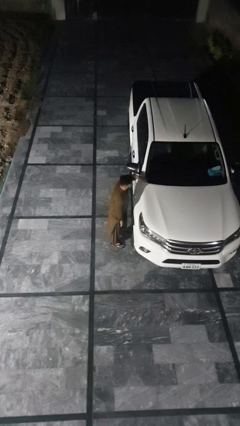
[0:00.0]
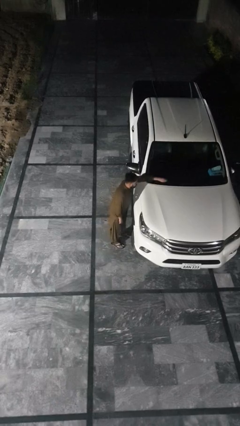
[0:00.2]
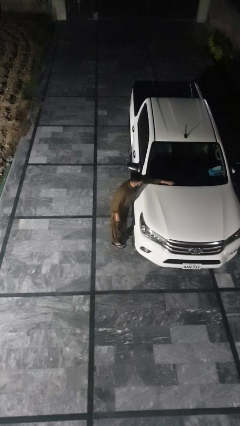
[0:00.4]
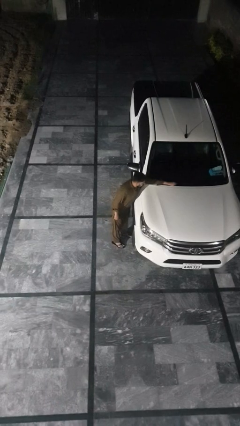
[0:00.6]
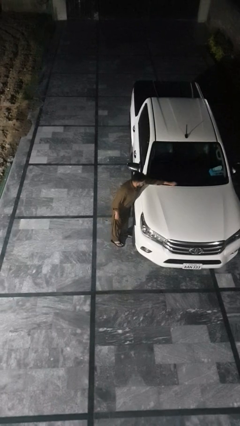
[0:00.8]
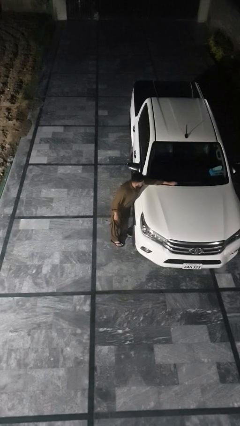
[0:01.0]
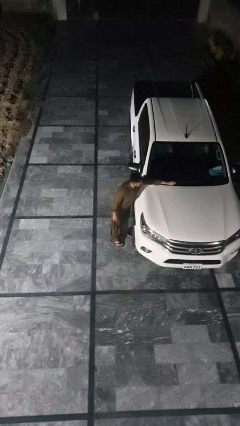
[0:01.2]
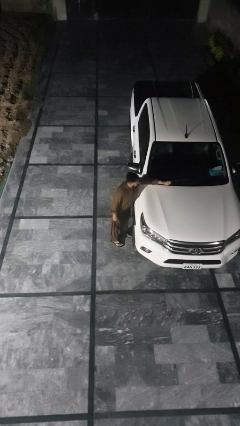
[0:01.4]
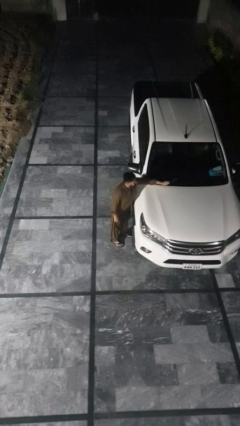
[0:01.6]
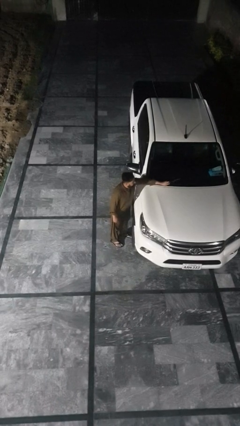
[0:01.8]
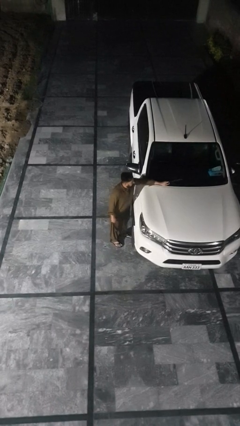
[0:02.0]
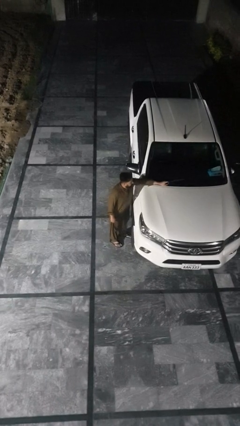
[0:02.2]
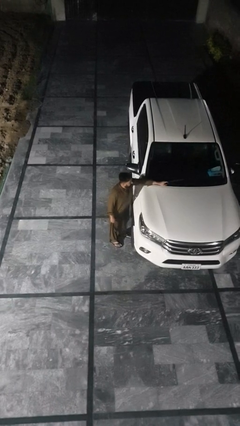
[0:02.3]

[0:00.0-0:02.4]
person flips up car wipers

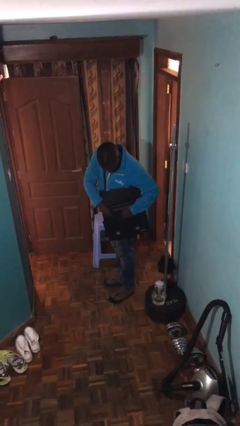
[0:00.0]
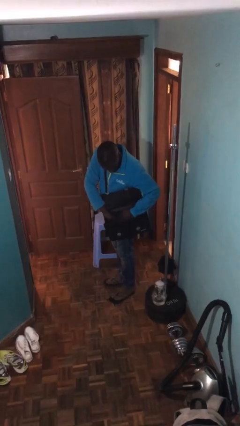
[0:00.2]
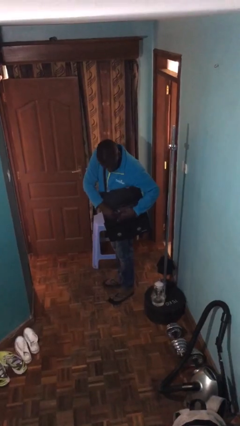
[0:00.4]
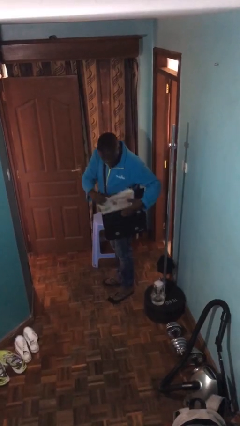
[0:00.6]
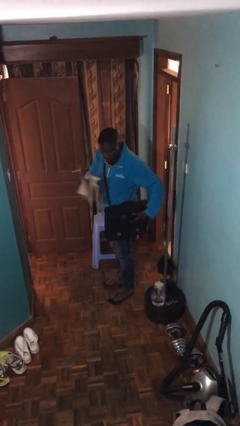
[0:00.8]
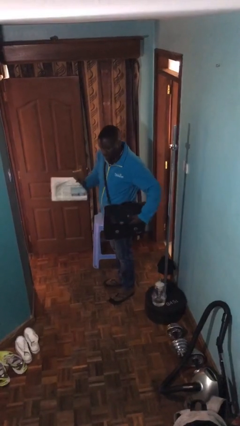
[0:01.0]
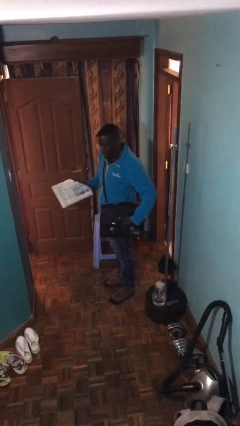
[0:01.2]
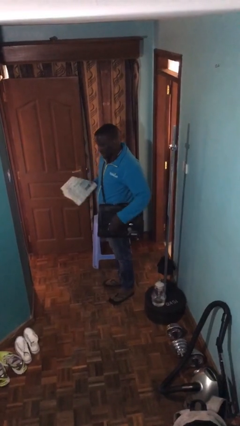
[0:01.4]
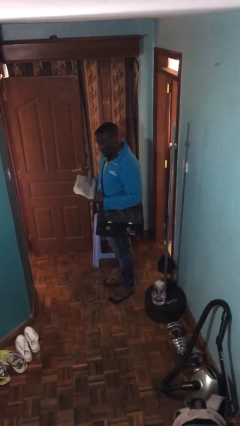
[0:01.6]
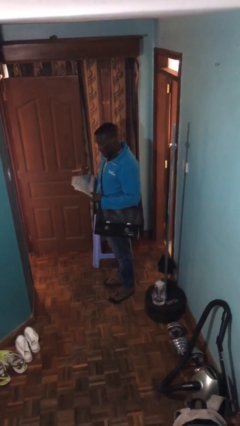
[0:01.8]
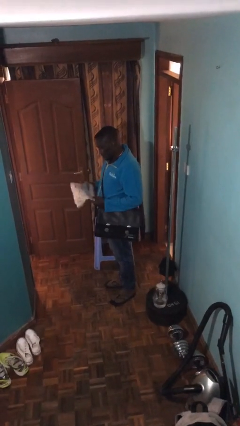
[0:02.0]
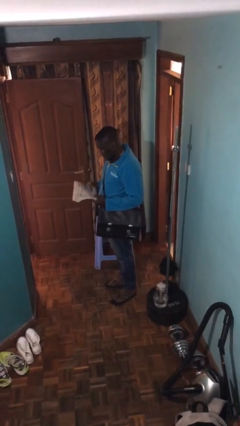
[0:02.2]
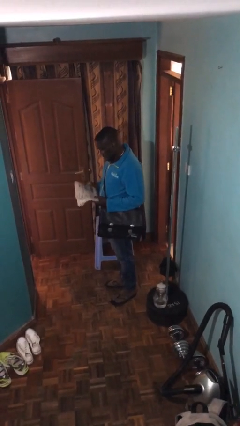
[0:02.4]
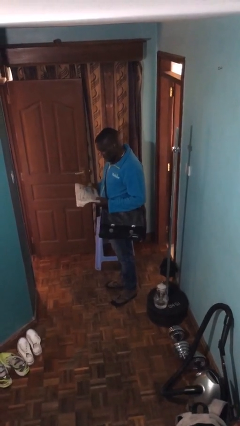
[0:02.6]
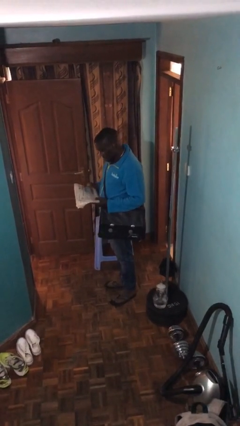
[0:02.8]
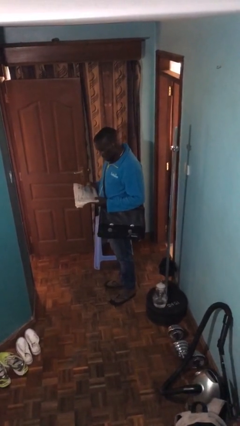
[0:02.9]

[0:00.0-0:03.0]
person takes object from purse

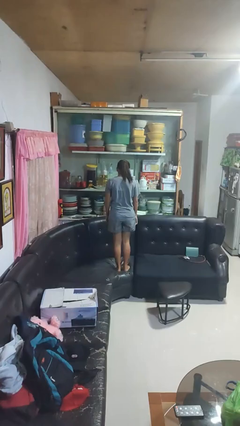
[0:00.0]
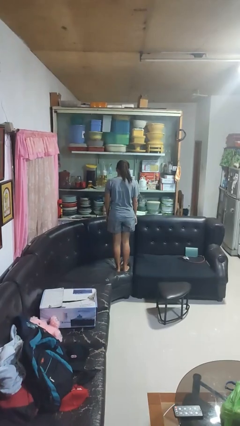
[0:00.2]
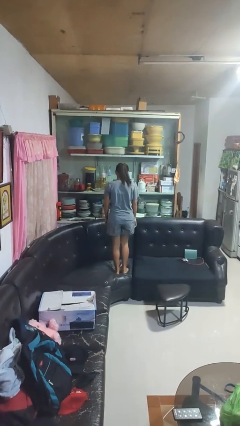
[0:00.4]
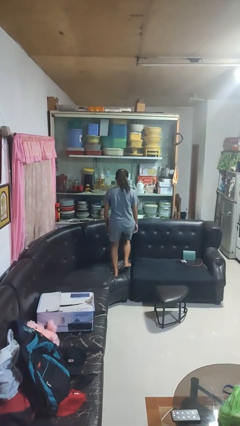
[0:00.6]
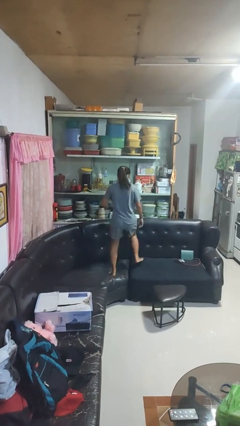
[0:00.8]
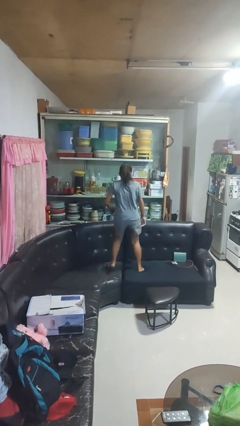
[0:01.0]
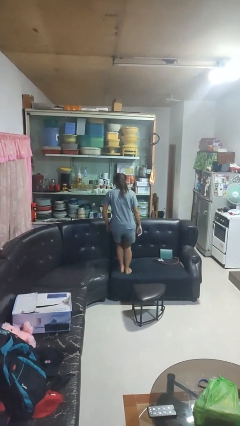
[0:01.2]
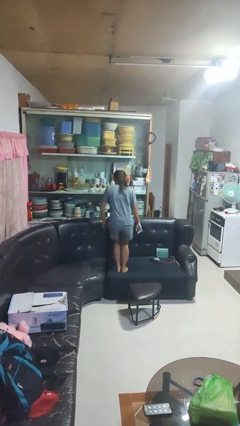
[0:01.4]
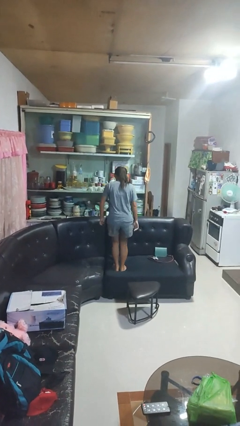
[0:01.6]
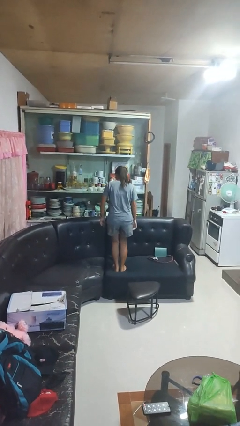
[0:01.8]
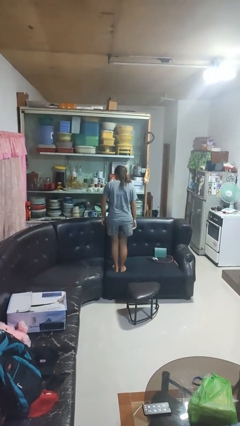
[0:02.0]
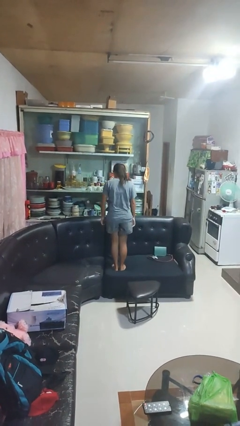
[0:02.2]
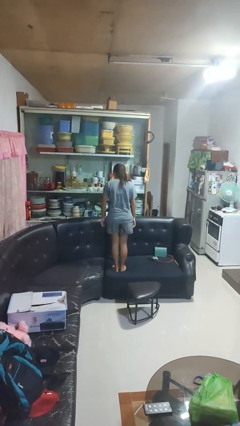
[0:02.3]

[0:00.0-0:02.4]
person jumps on couch

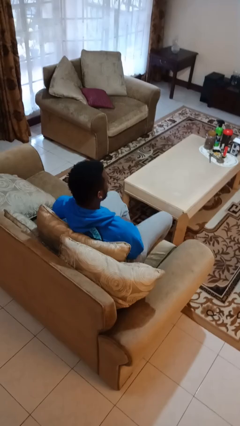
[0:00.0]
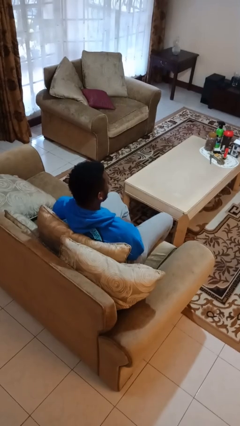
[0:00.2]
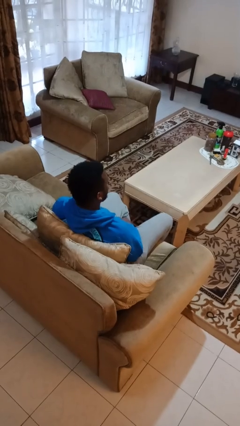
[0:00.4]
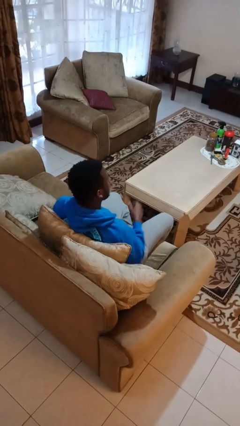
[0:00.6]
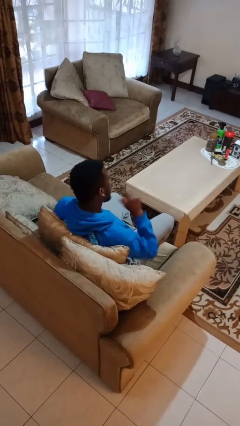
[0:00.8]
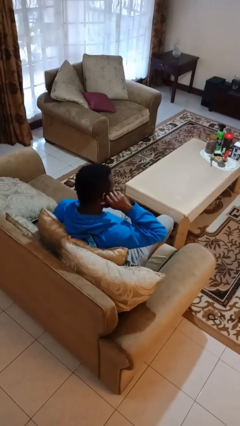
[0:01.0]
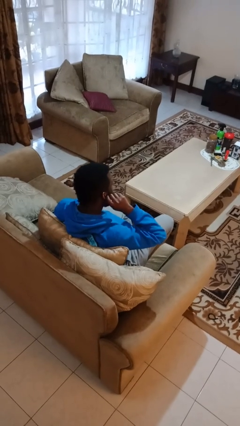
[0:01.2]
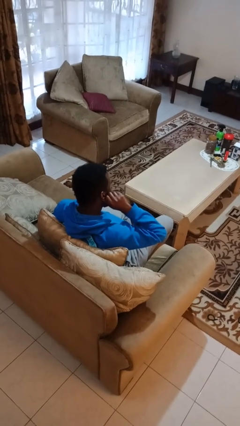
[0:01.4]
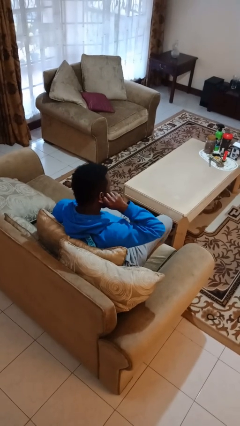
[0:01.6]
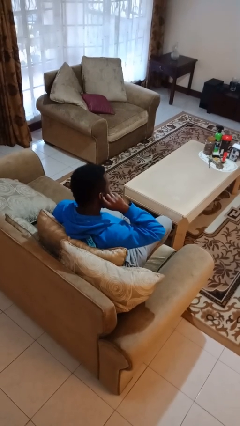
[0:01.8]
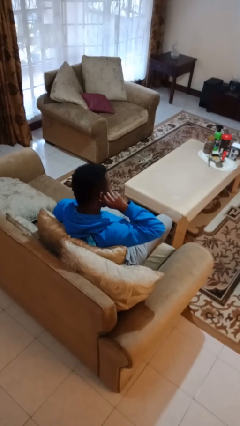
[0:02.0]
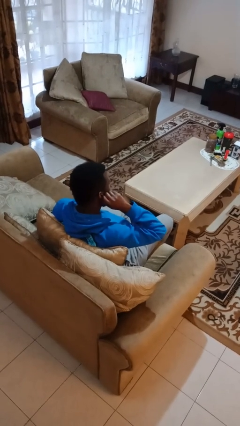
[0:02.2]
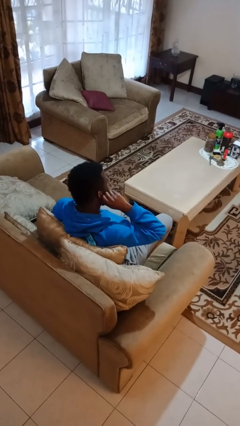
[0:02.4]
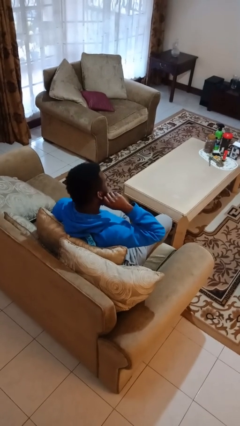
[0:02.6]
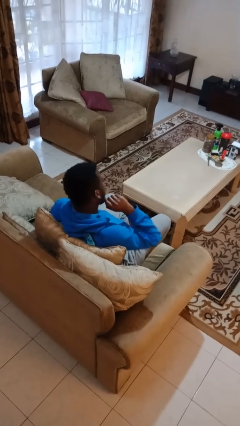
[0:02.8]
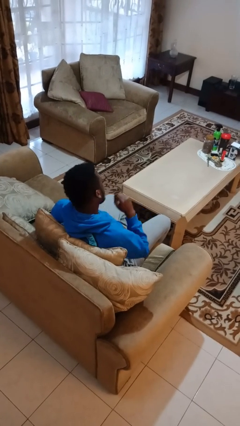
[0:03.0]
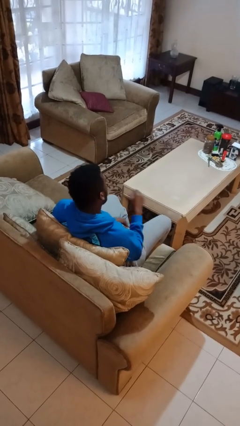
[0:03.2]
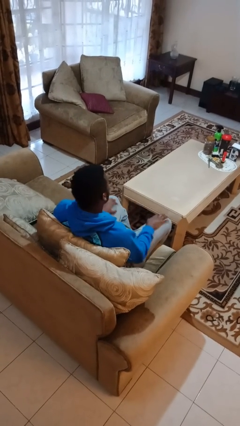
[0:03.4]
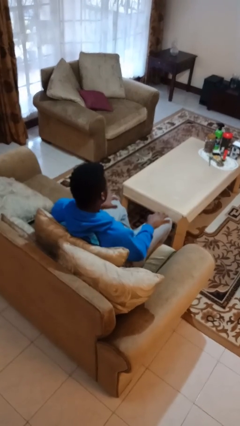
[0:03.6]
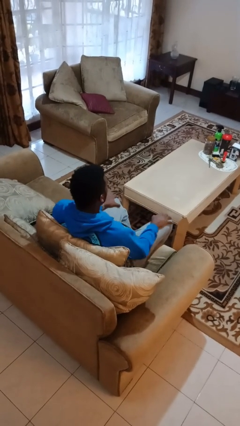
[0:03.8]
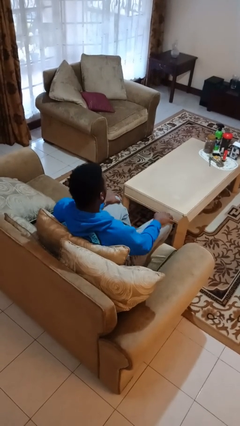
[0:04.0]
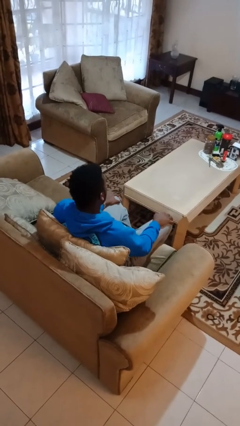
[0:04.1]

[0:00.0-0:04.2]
person touches earlobe

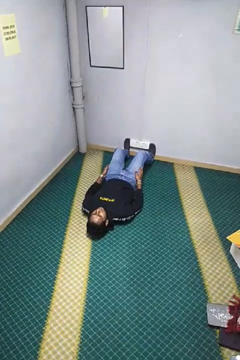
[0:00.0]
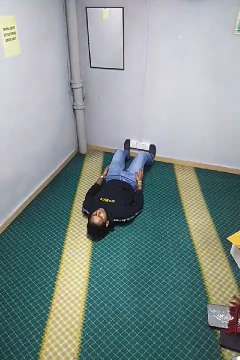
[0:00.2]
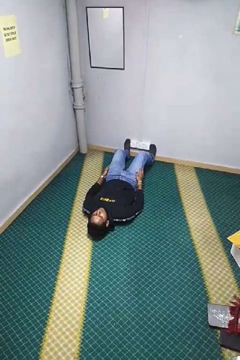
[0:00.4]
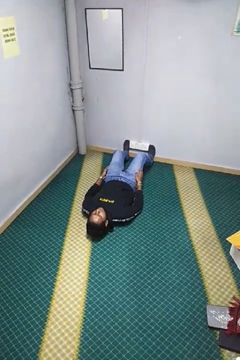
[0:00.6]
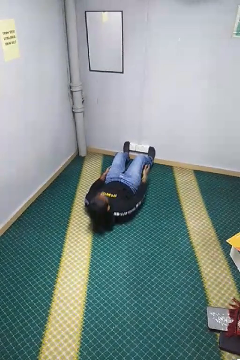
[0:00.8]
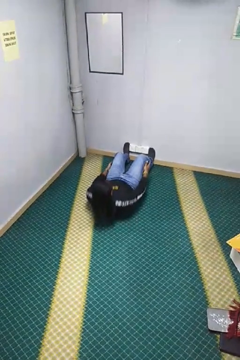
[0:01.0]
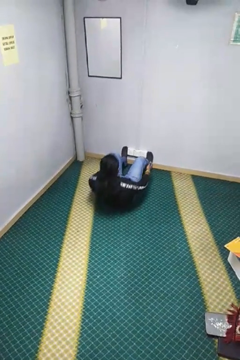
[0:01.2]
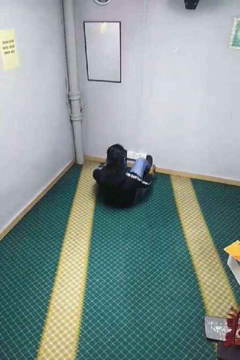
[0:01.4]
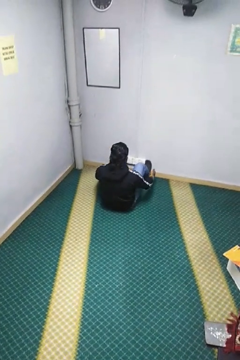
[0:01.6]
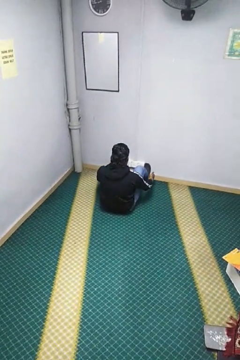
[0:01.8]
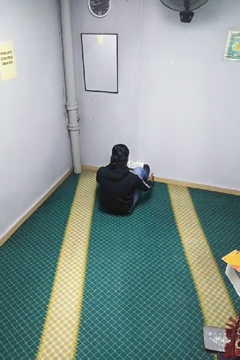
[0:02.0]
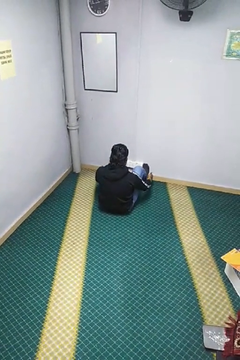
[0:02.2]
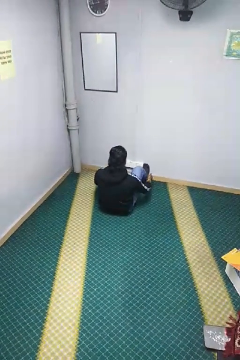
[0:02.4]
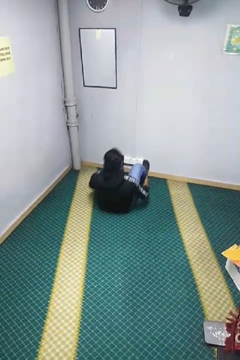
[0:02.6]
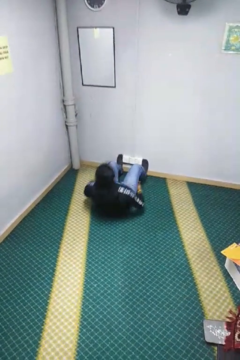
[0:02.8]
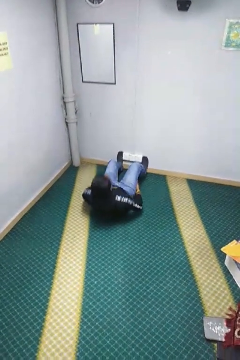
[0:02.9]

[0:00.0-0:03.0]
person exercises with situp

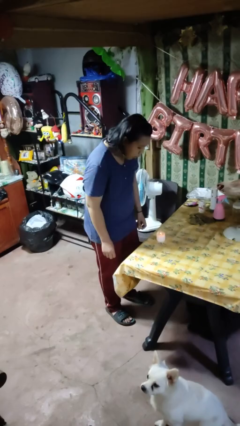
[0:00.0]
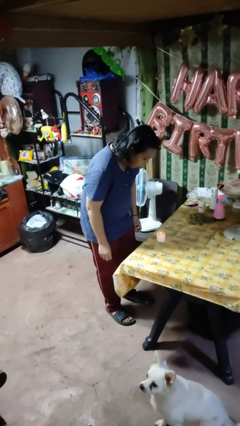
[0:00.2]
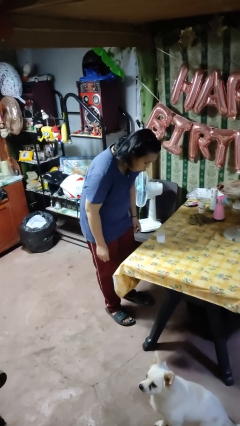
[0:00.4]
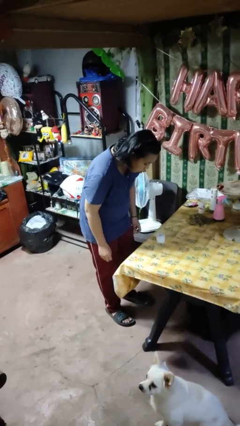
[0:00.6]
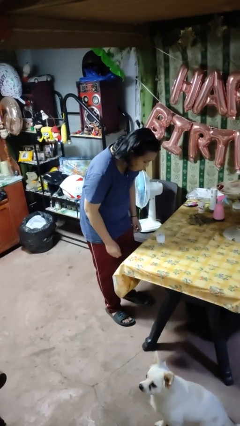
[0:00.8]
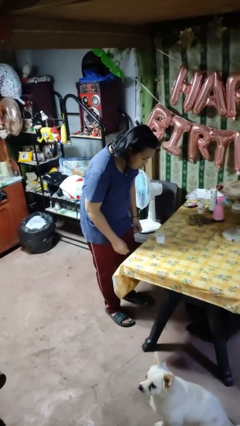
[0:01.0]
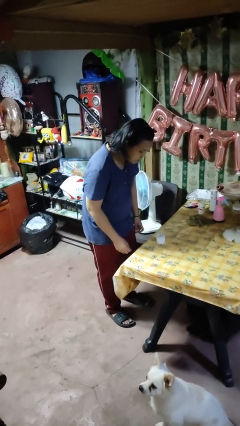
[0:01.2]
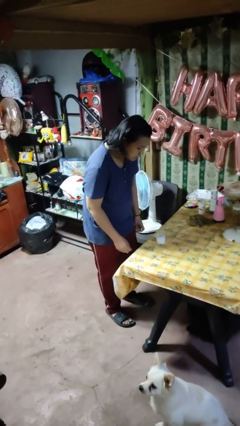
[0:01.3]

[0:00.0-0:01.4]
person extinguishes candle

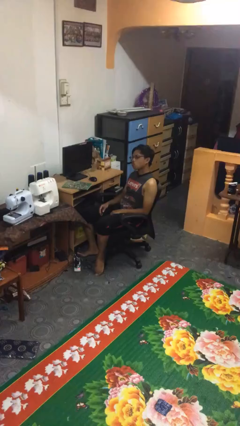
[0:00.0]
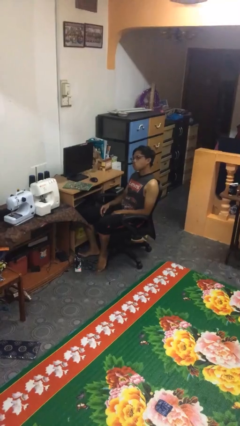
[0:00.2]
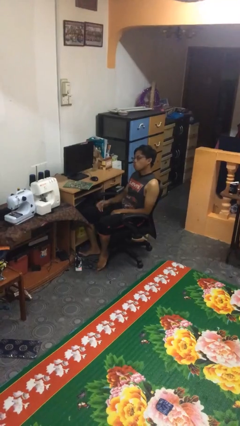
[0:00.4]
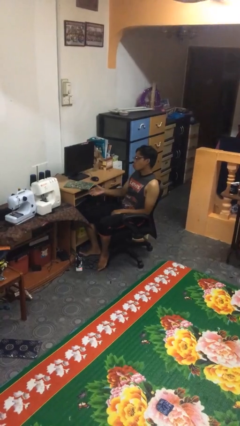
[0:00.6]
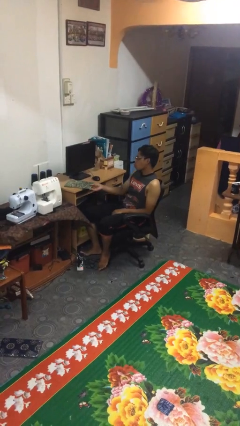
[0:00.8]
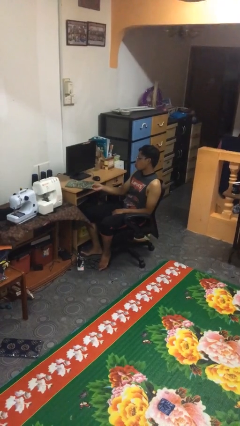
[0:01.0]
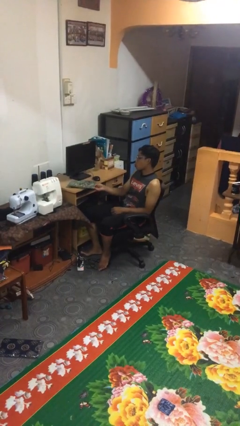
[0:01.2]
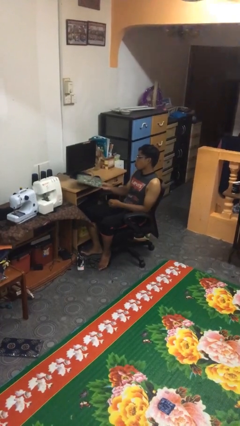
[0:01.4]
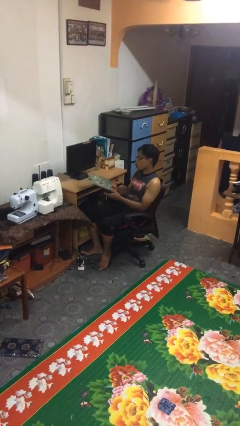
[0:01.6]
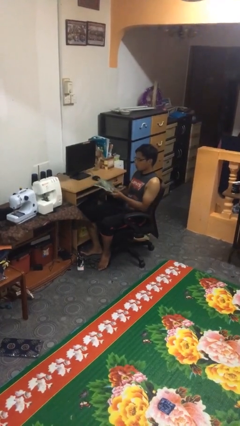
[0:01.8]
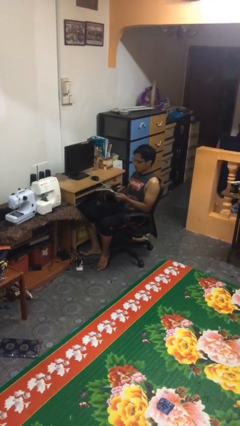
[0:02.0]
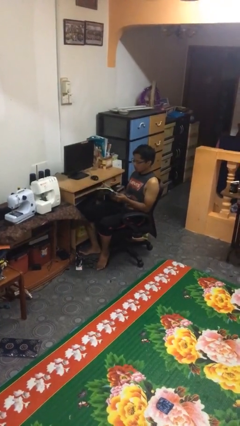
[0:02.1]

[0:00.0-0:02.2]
person picks up object from table
